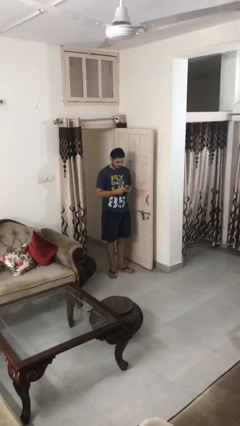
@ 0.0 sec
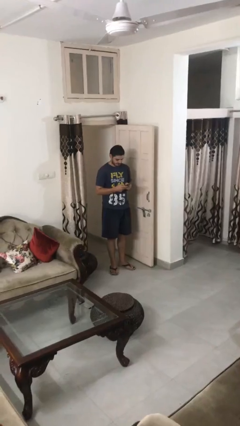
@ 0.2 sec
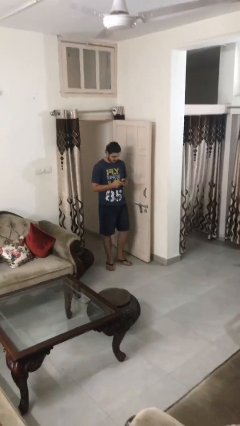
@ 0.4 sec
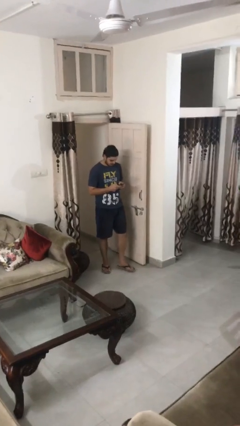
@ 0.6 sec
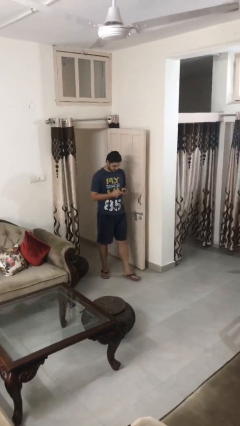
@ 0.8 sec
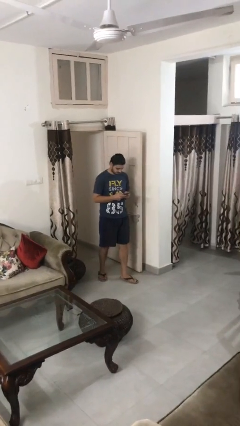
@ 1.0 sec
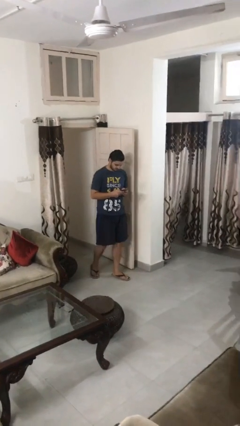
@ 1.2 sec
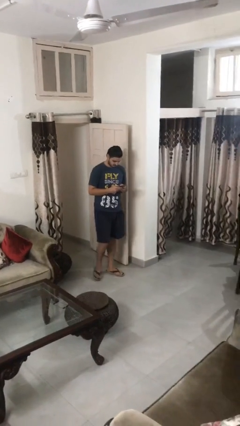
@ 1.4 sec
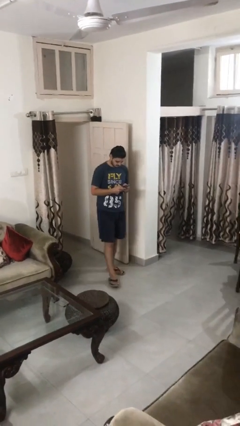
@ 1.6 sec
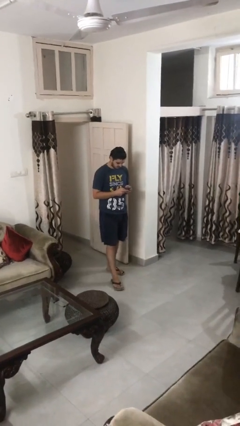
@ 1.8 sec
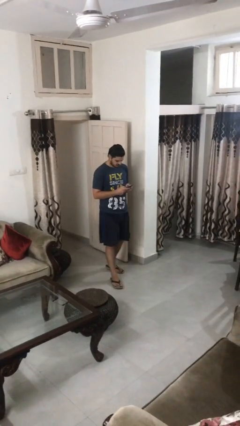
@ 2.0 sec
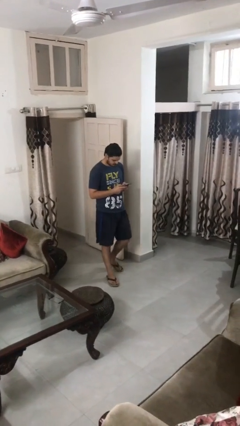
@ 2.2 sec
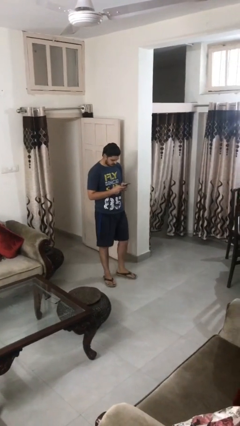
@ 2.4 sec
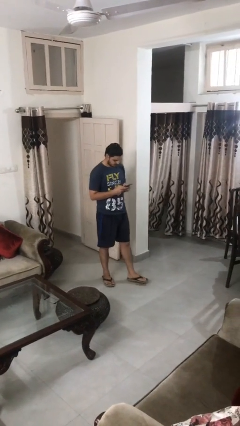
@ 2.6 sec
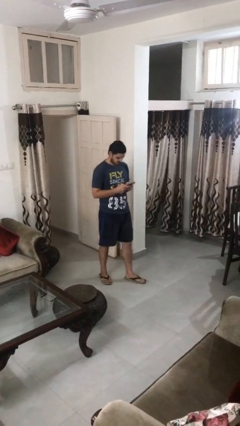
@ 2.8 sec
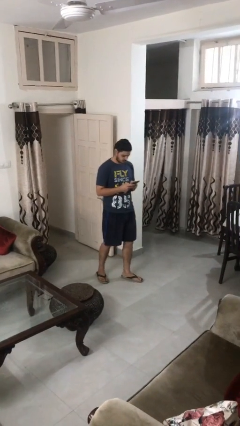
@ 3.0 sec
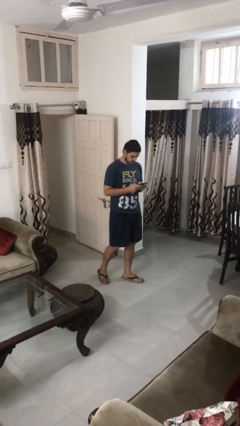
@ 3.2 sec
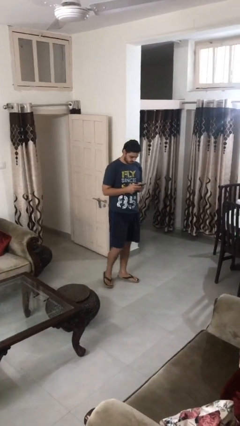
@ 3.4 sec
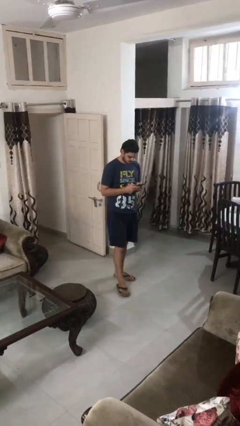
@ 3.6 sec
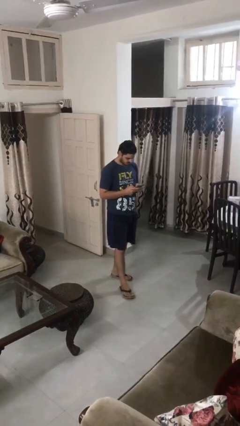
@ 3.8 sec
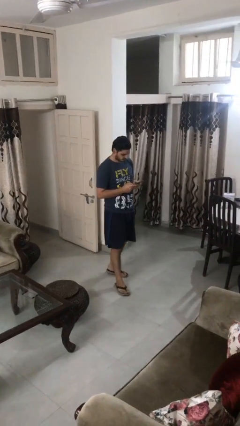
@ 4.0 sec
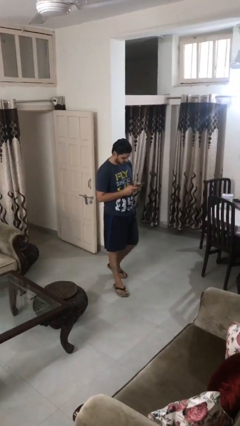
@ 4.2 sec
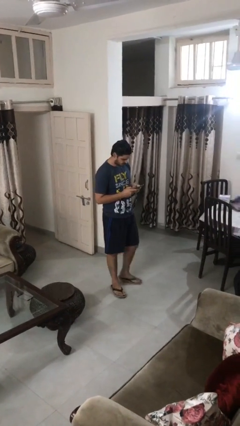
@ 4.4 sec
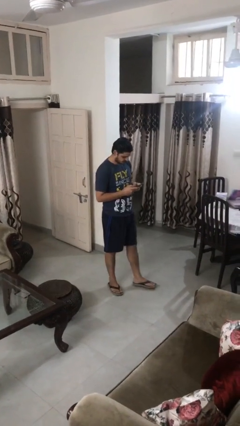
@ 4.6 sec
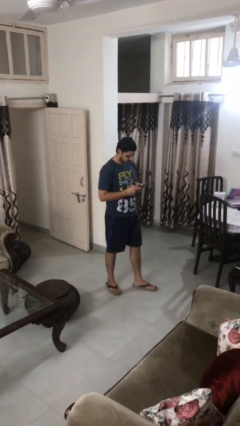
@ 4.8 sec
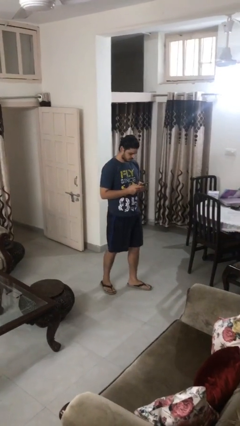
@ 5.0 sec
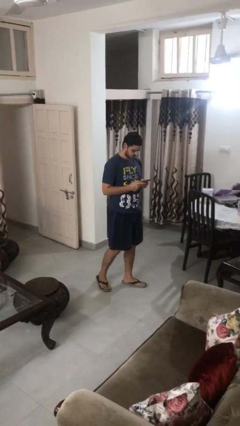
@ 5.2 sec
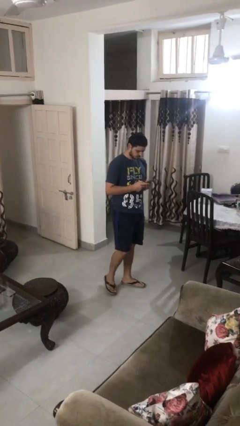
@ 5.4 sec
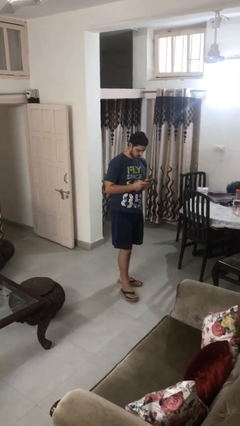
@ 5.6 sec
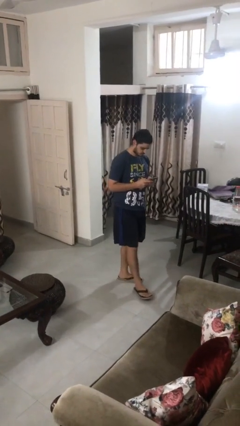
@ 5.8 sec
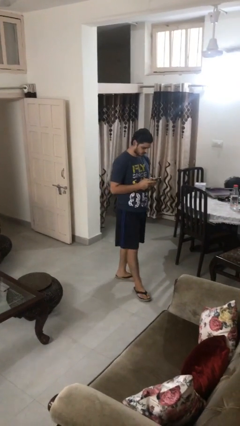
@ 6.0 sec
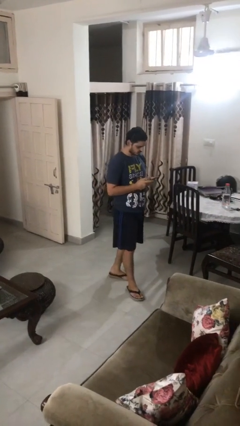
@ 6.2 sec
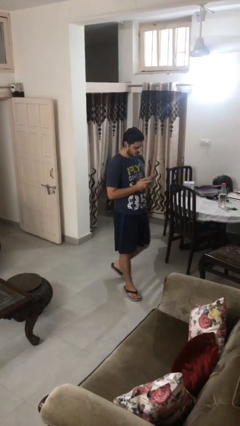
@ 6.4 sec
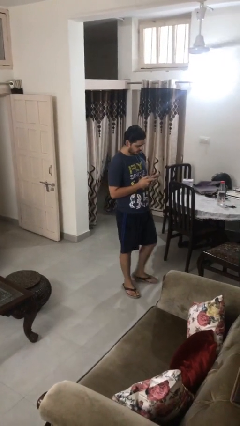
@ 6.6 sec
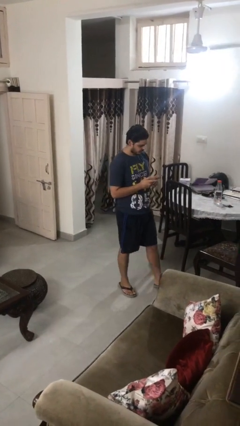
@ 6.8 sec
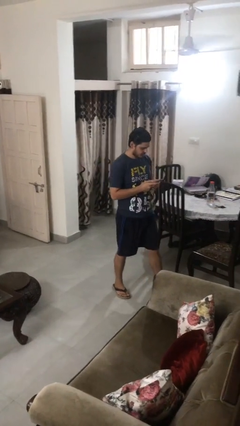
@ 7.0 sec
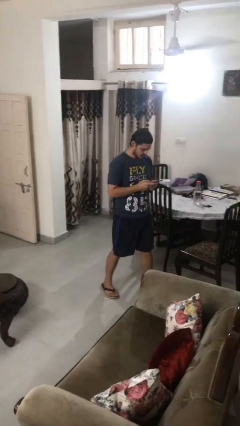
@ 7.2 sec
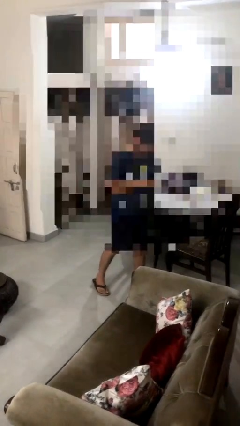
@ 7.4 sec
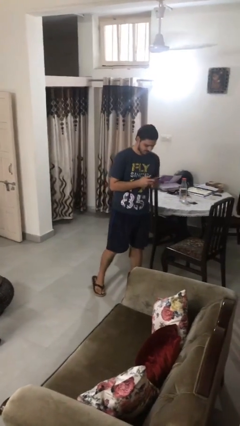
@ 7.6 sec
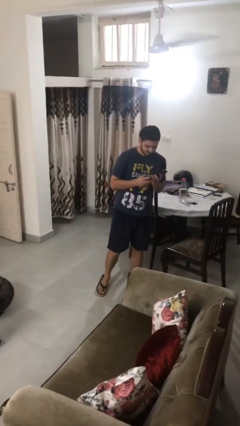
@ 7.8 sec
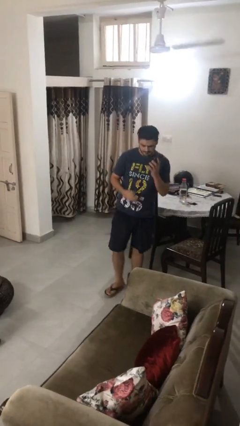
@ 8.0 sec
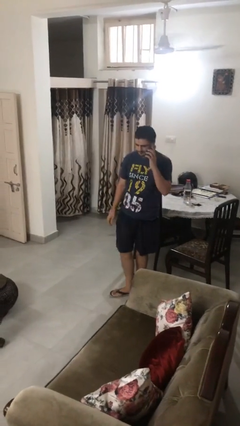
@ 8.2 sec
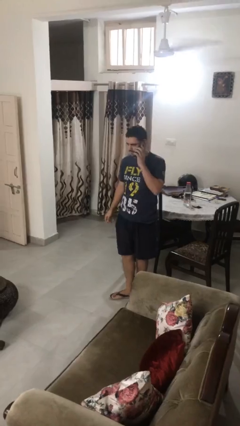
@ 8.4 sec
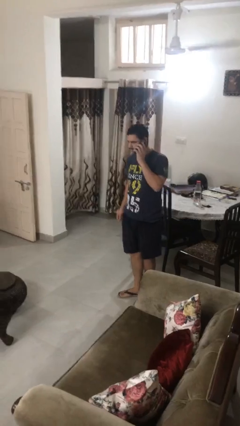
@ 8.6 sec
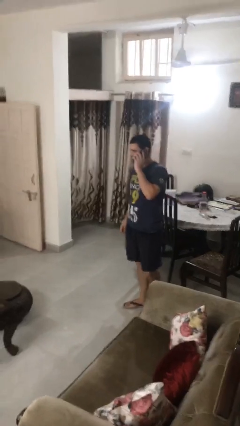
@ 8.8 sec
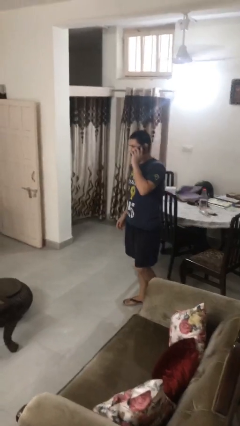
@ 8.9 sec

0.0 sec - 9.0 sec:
person texts on phone

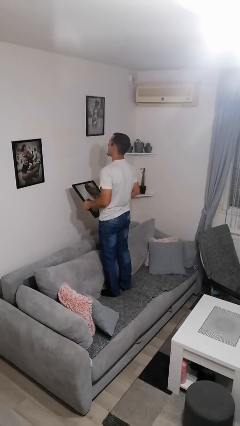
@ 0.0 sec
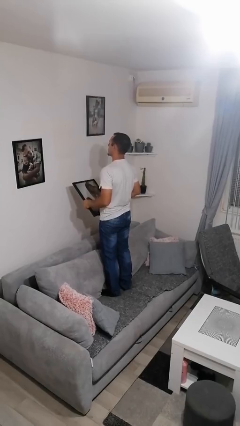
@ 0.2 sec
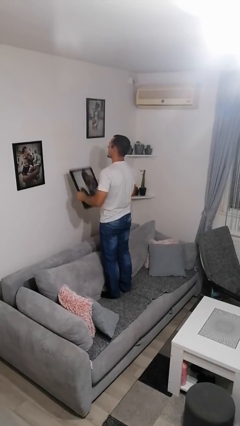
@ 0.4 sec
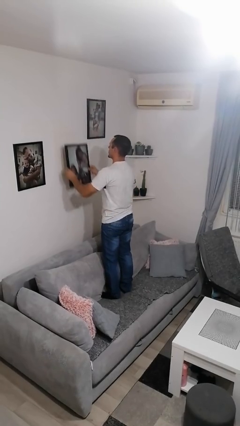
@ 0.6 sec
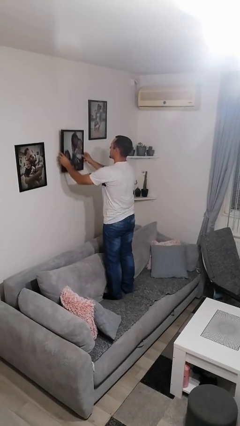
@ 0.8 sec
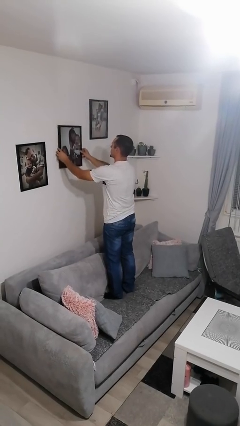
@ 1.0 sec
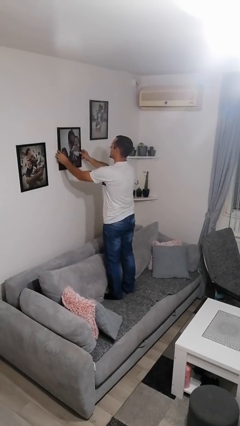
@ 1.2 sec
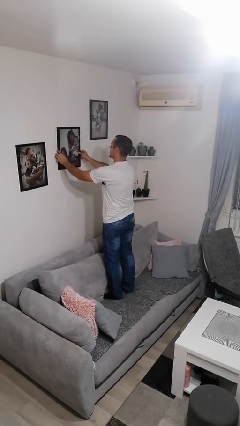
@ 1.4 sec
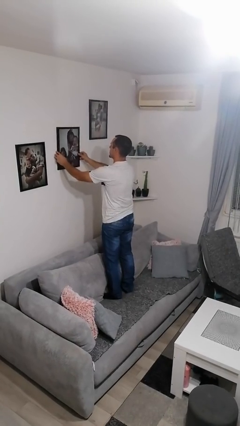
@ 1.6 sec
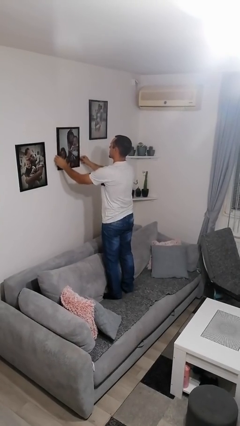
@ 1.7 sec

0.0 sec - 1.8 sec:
person puts up picture frame

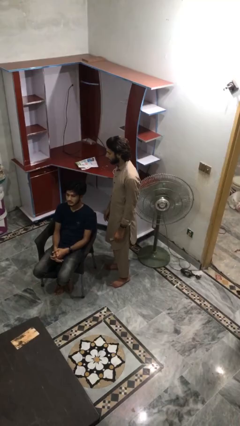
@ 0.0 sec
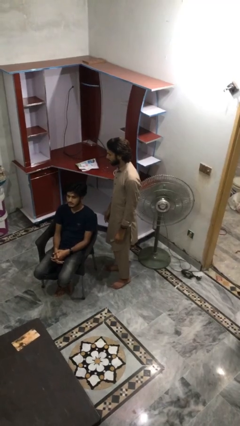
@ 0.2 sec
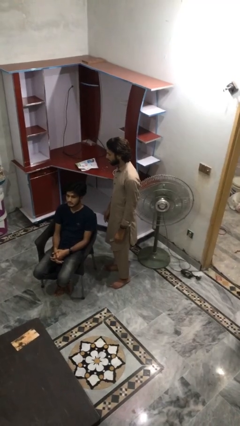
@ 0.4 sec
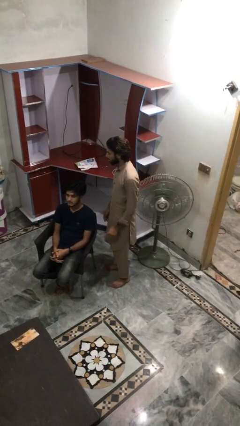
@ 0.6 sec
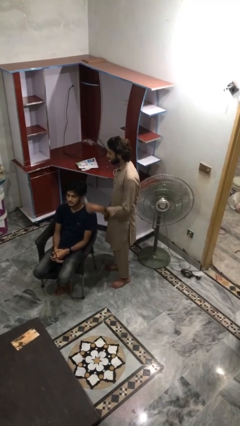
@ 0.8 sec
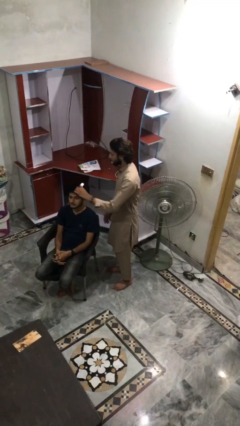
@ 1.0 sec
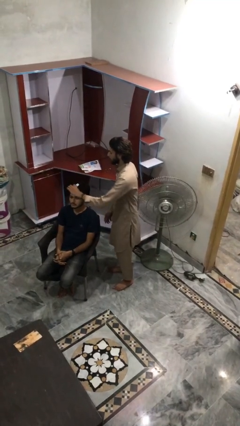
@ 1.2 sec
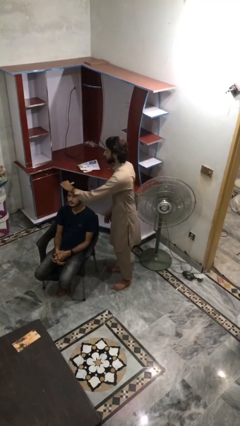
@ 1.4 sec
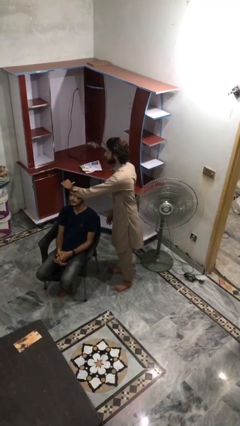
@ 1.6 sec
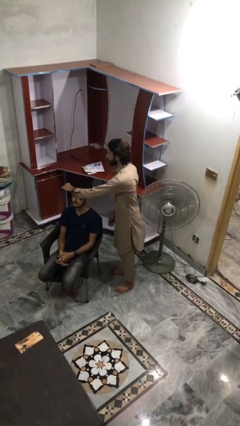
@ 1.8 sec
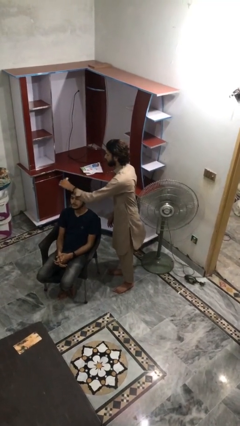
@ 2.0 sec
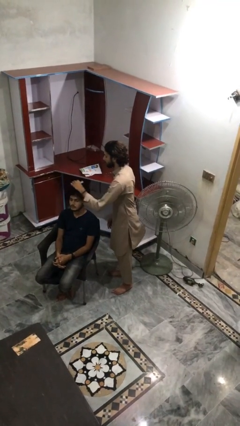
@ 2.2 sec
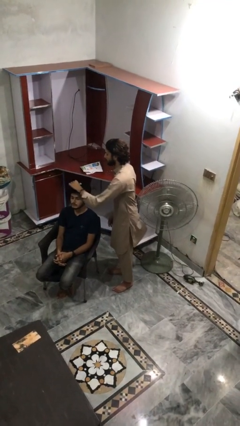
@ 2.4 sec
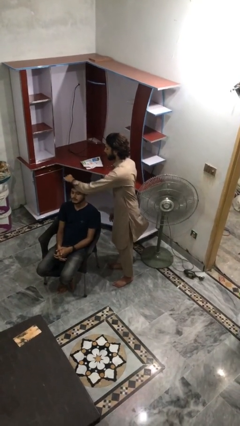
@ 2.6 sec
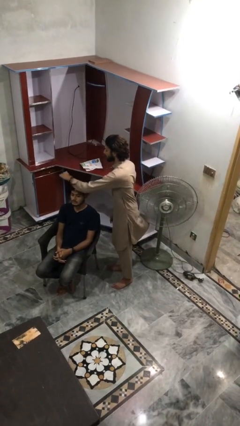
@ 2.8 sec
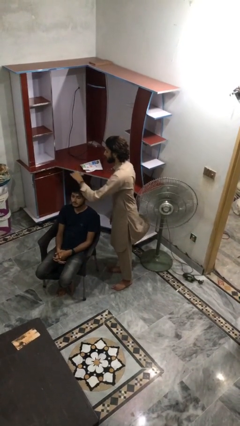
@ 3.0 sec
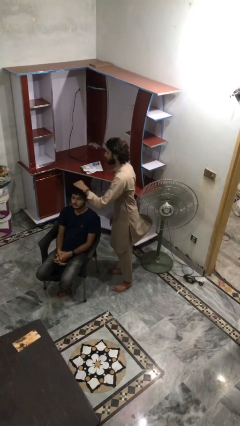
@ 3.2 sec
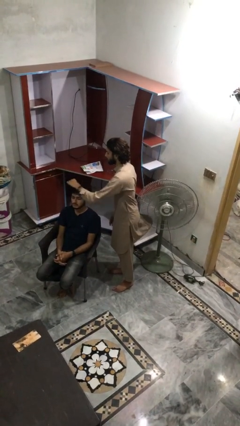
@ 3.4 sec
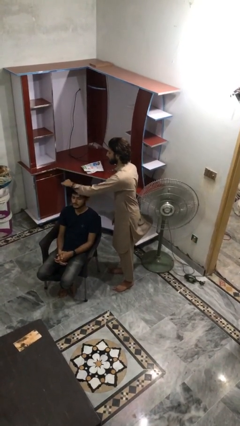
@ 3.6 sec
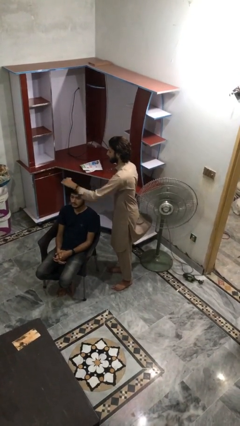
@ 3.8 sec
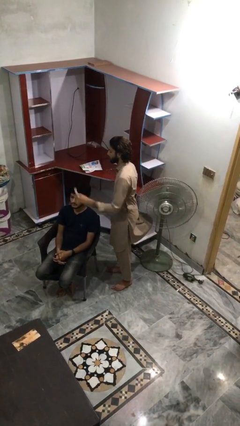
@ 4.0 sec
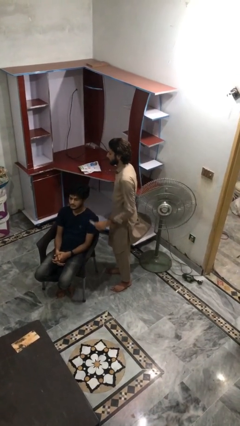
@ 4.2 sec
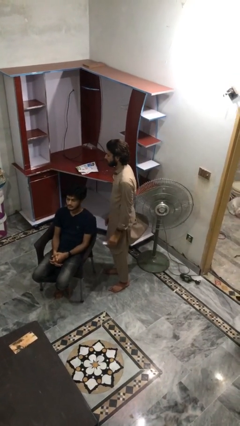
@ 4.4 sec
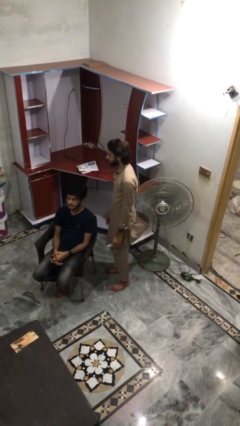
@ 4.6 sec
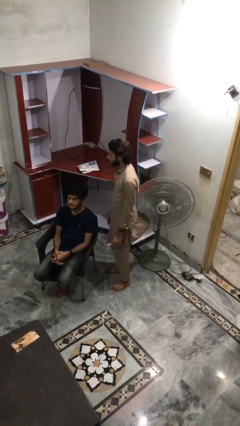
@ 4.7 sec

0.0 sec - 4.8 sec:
person brushes hair of person

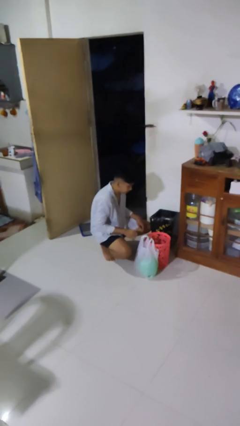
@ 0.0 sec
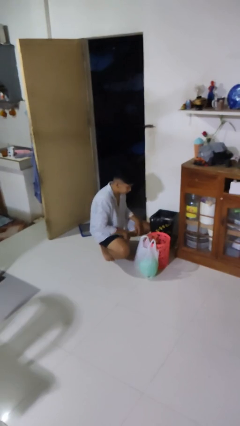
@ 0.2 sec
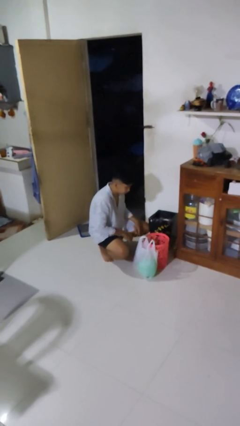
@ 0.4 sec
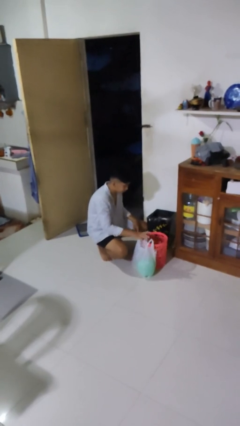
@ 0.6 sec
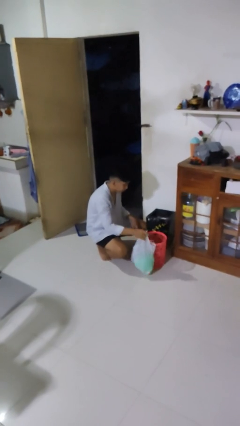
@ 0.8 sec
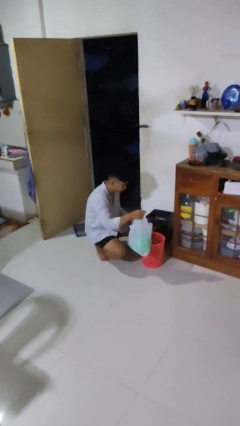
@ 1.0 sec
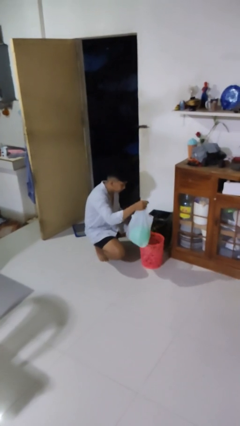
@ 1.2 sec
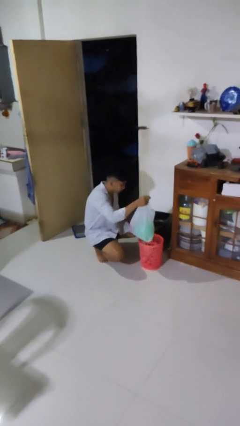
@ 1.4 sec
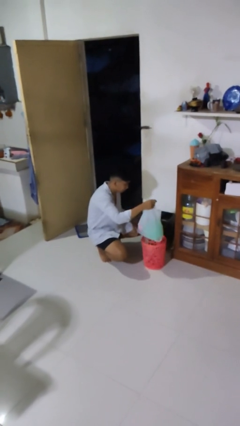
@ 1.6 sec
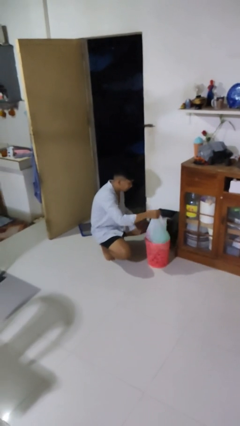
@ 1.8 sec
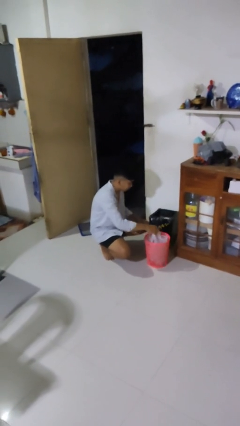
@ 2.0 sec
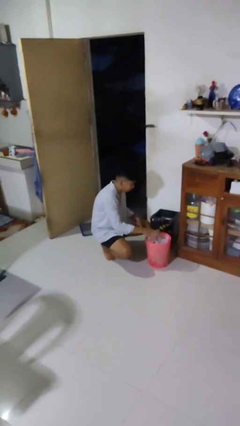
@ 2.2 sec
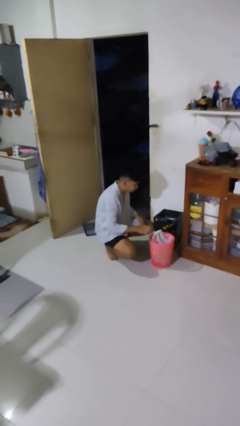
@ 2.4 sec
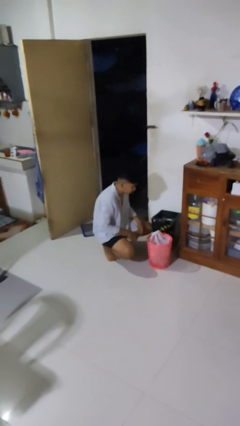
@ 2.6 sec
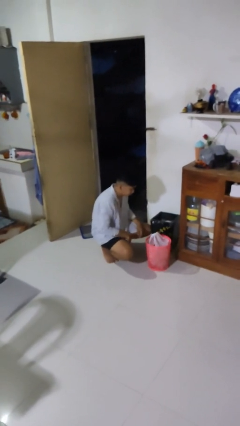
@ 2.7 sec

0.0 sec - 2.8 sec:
person inserts trashbag into trashcan
